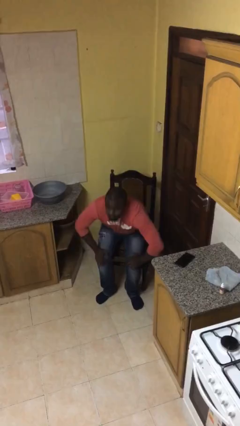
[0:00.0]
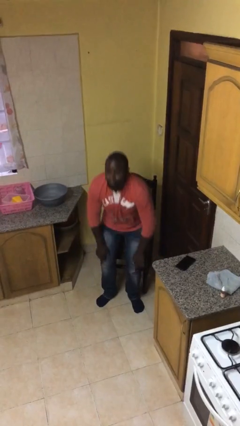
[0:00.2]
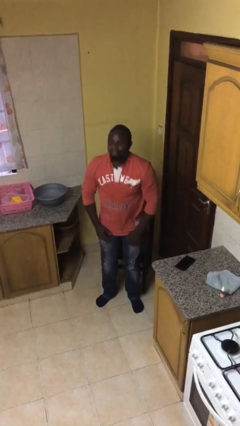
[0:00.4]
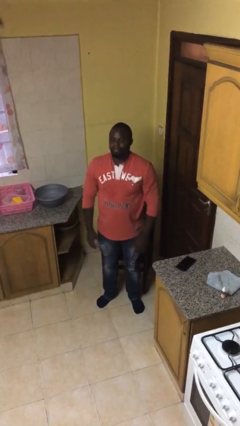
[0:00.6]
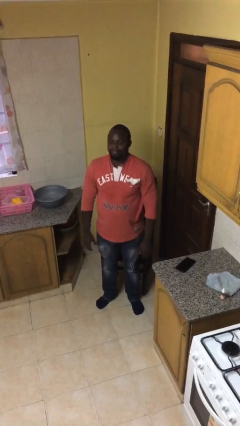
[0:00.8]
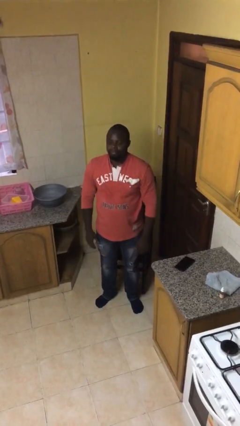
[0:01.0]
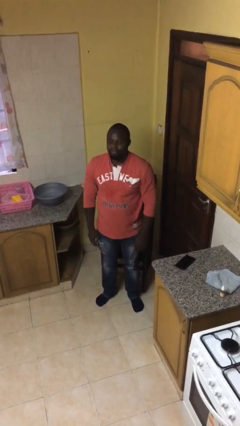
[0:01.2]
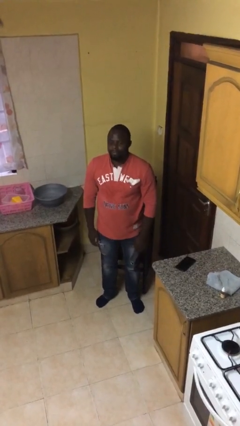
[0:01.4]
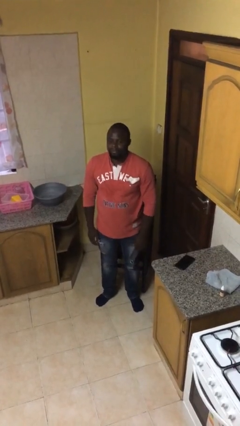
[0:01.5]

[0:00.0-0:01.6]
person stands up

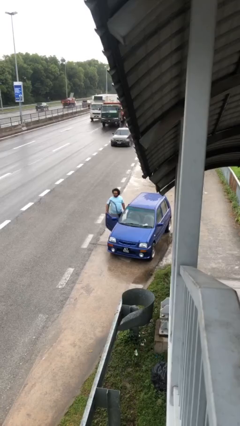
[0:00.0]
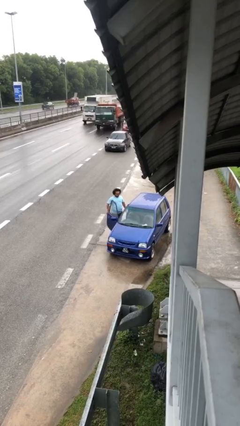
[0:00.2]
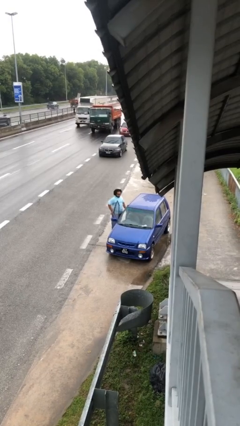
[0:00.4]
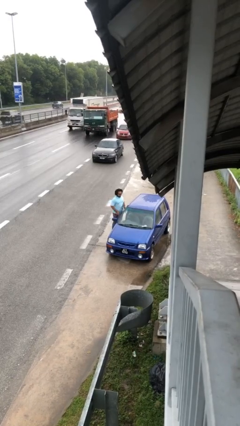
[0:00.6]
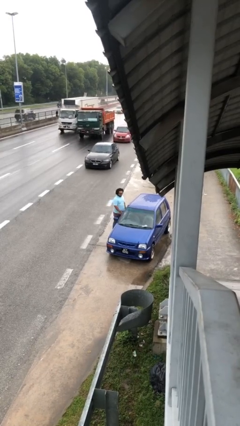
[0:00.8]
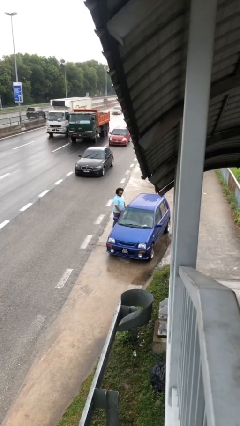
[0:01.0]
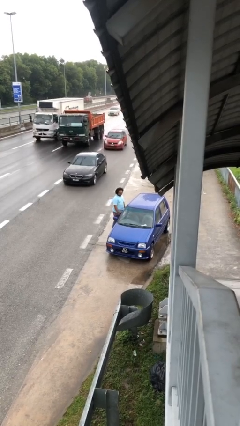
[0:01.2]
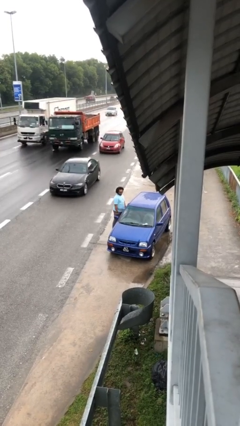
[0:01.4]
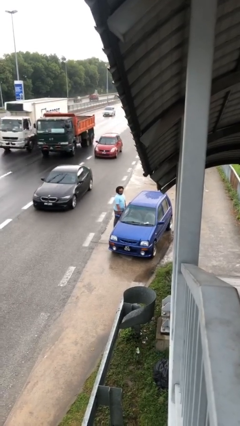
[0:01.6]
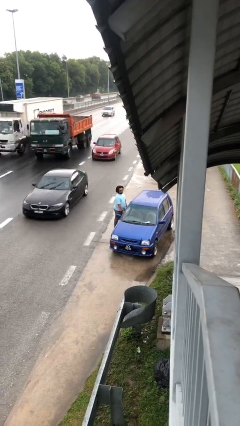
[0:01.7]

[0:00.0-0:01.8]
person closes car door

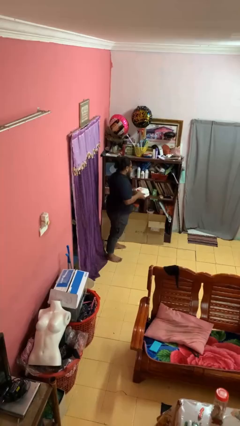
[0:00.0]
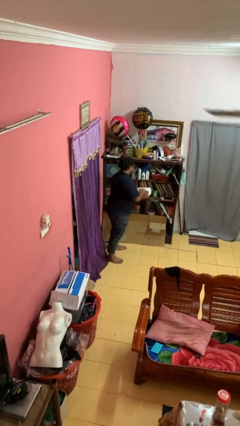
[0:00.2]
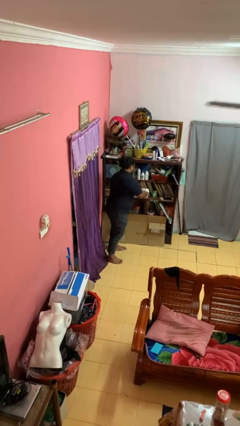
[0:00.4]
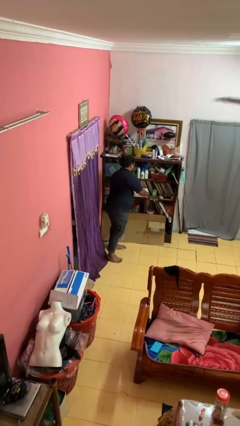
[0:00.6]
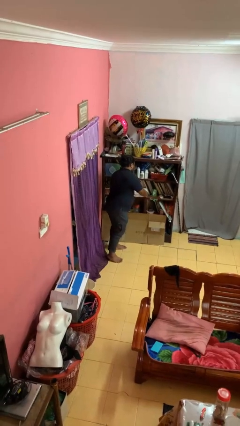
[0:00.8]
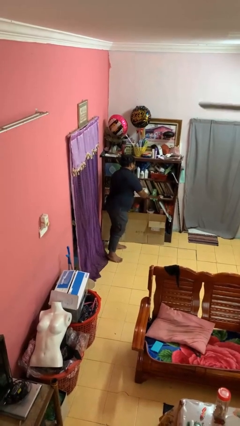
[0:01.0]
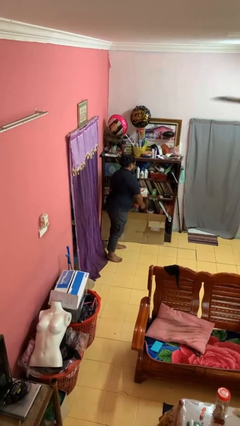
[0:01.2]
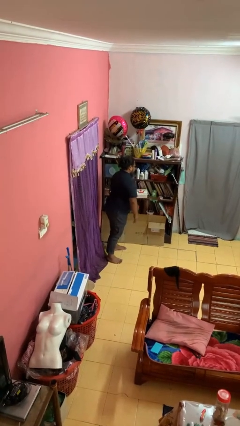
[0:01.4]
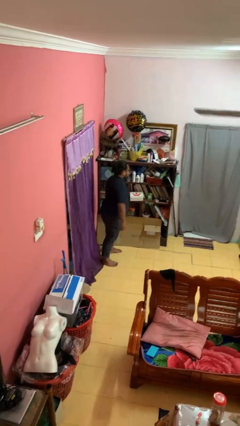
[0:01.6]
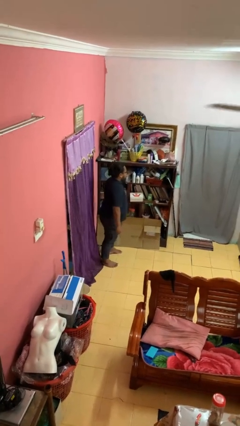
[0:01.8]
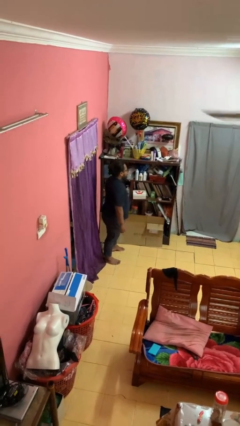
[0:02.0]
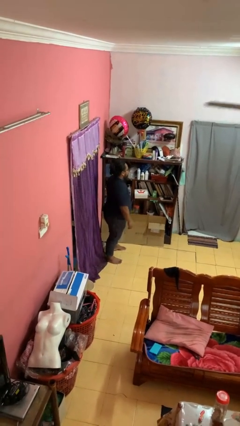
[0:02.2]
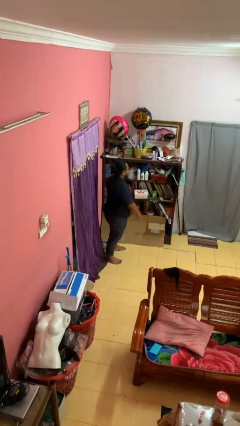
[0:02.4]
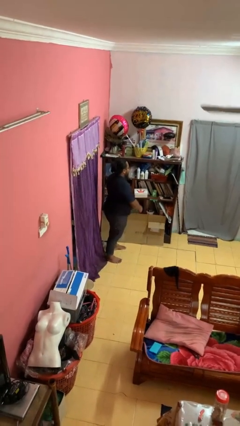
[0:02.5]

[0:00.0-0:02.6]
person puts object in cabinet

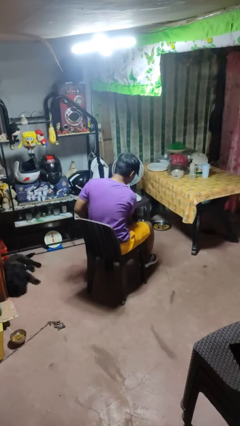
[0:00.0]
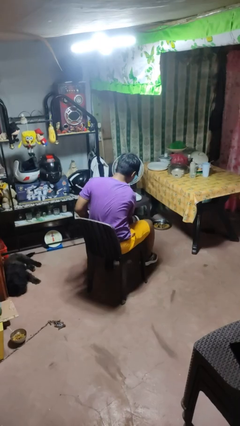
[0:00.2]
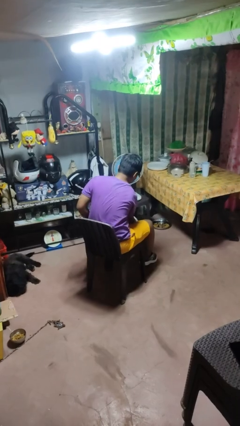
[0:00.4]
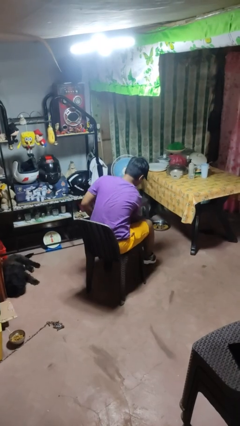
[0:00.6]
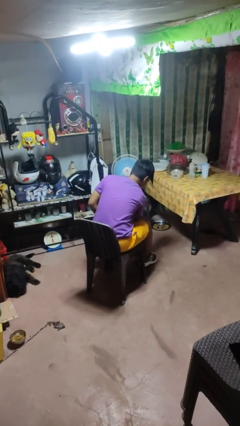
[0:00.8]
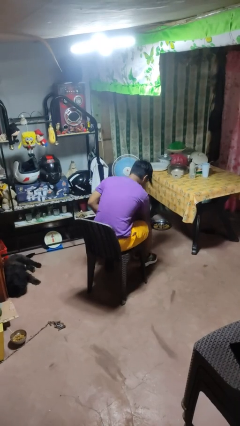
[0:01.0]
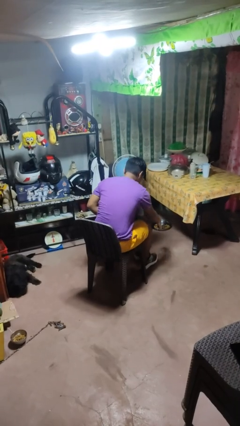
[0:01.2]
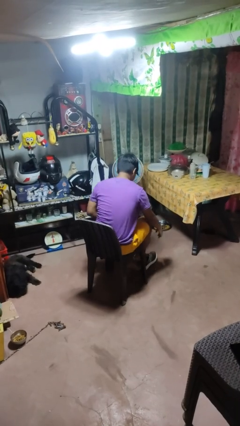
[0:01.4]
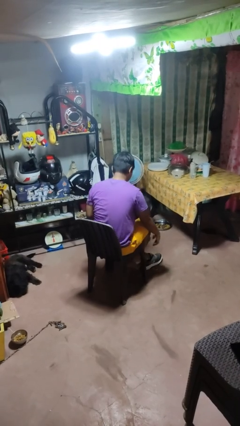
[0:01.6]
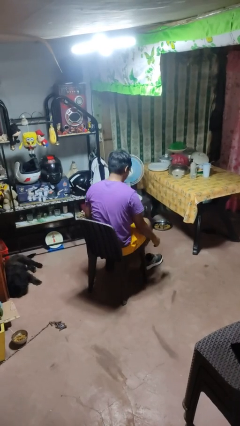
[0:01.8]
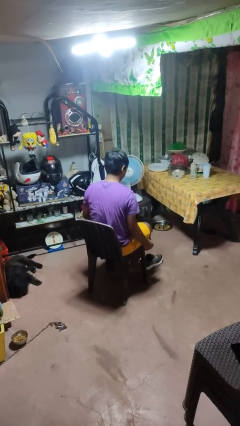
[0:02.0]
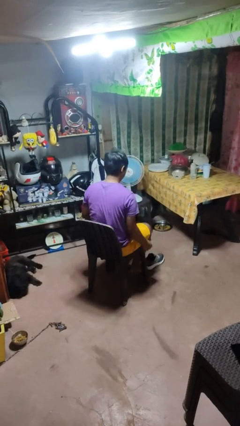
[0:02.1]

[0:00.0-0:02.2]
person takes off shoes

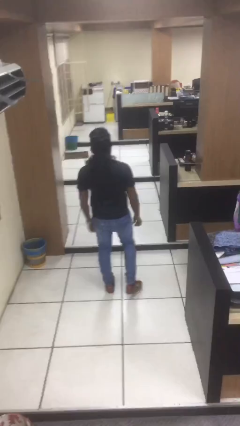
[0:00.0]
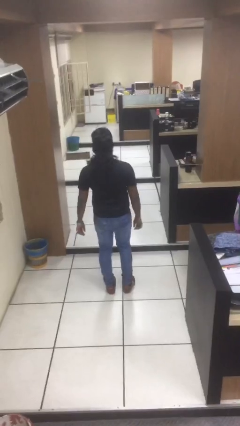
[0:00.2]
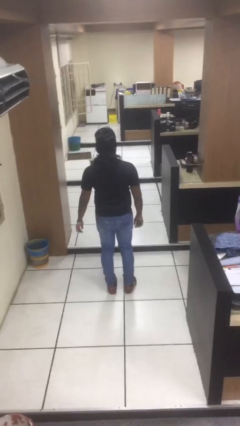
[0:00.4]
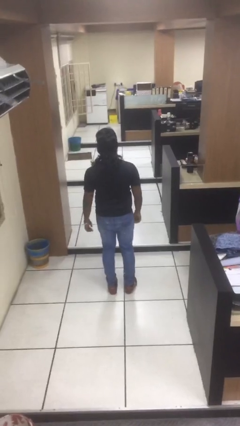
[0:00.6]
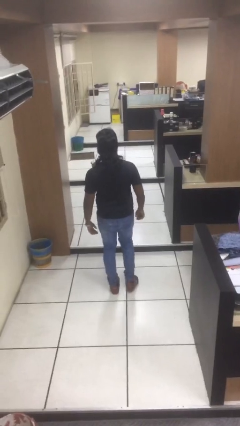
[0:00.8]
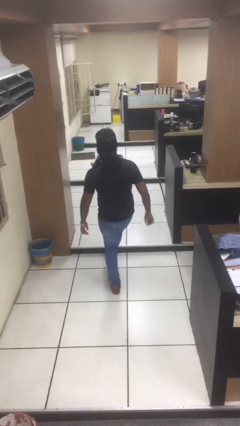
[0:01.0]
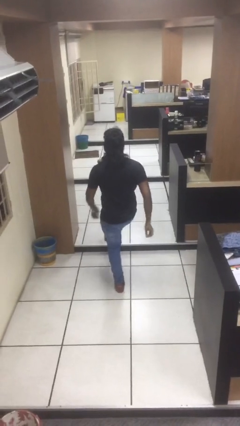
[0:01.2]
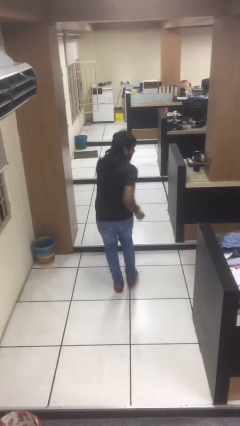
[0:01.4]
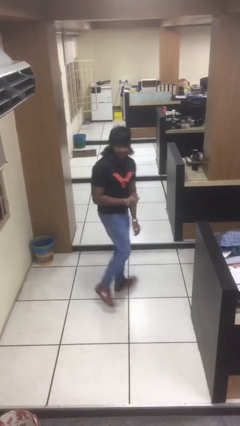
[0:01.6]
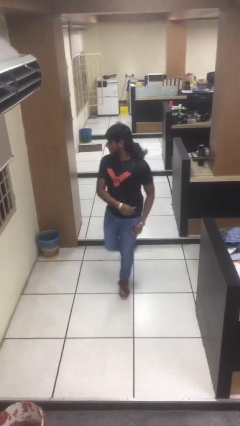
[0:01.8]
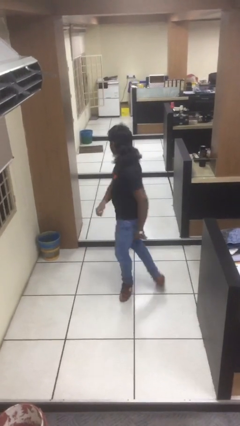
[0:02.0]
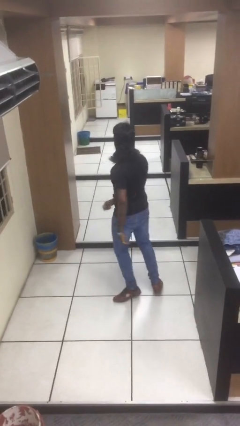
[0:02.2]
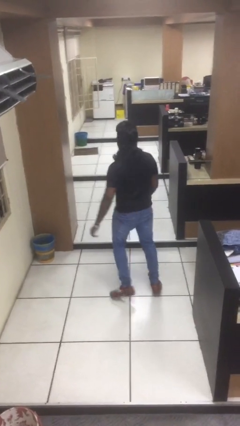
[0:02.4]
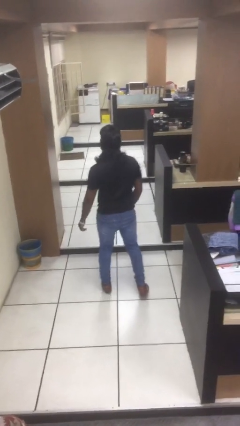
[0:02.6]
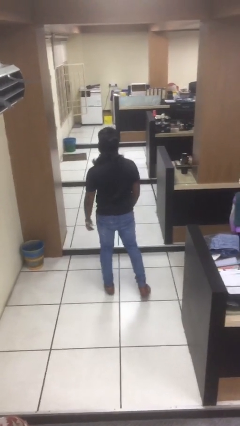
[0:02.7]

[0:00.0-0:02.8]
person twirls

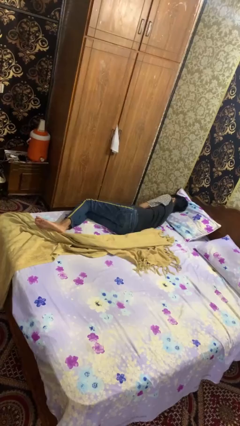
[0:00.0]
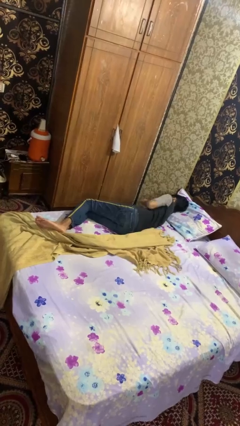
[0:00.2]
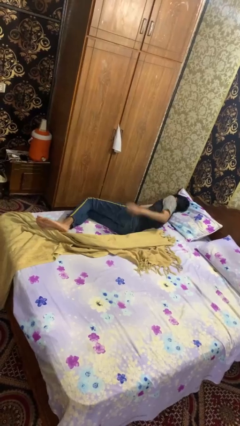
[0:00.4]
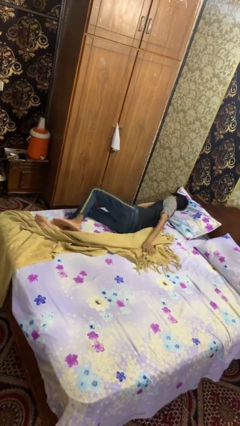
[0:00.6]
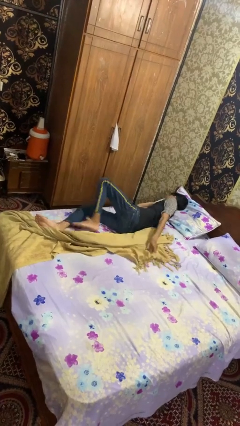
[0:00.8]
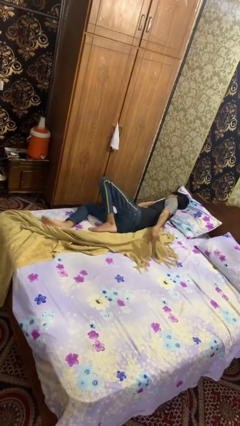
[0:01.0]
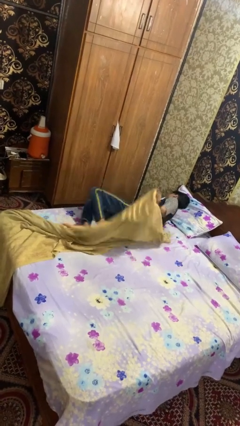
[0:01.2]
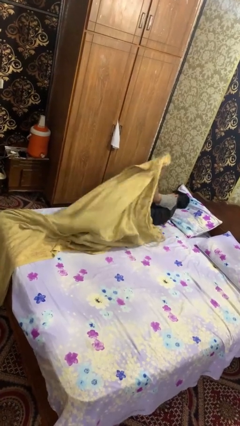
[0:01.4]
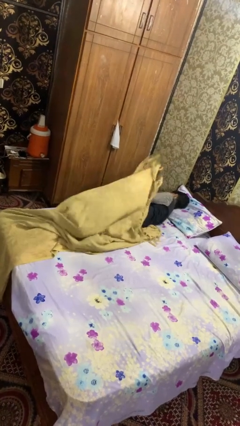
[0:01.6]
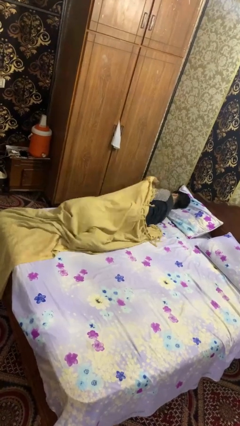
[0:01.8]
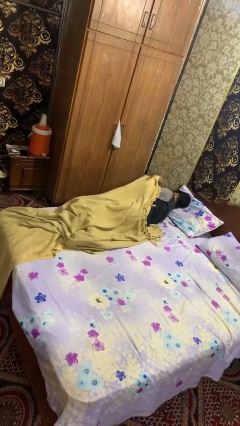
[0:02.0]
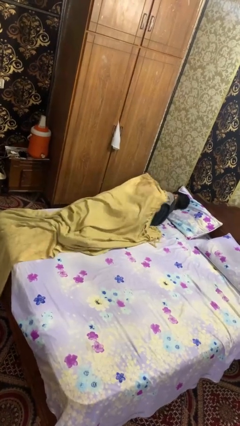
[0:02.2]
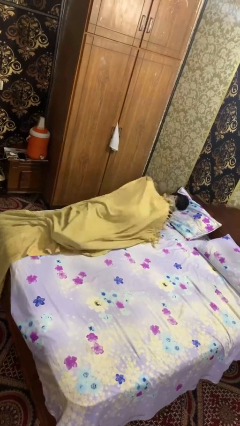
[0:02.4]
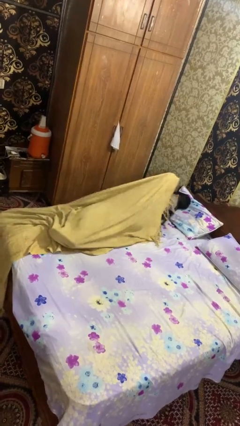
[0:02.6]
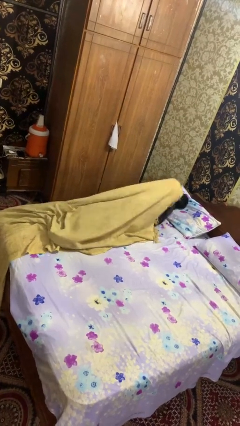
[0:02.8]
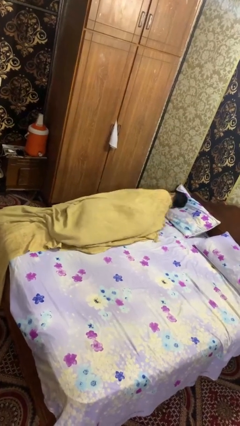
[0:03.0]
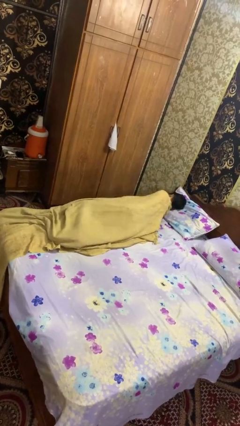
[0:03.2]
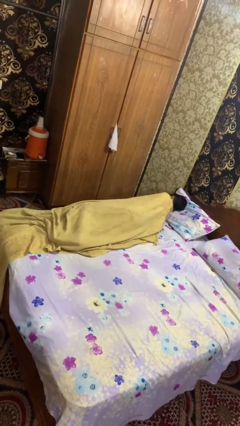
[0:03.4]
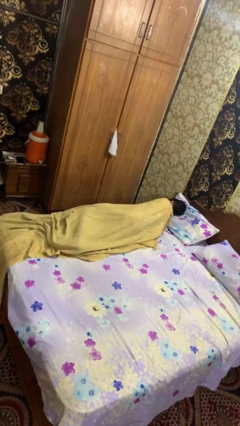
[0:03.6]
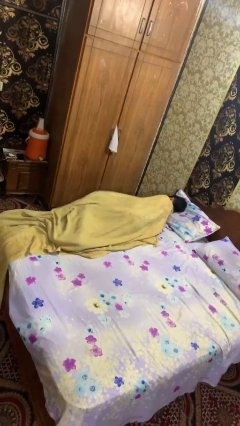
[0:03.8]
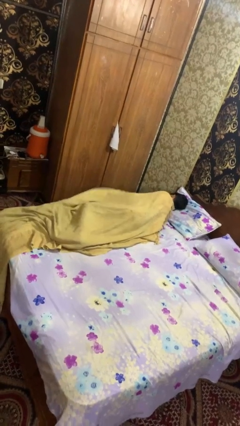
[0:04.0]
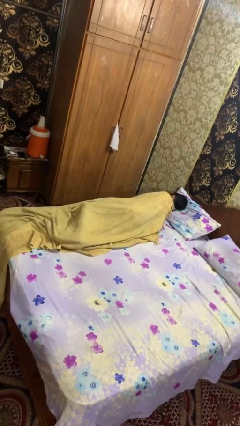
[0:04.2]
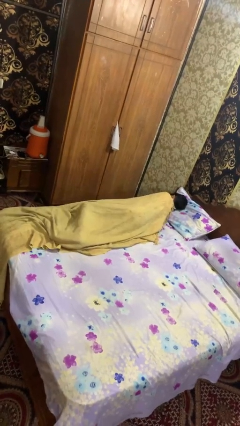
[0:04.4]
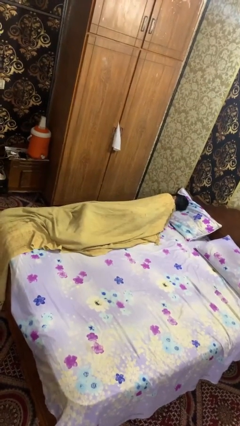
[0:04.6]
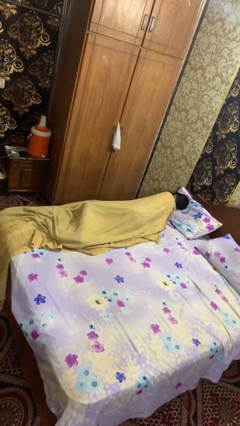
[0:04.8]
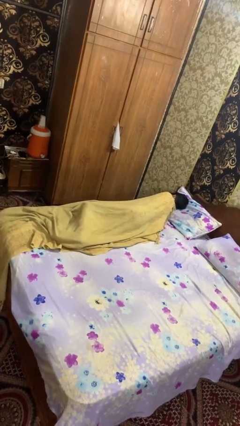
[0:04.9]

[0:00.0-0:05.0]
person covers with bedsheets

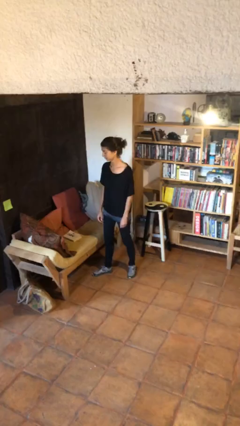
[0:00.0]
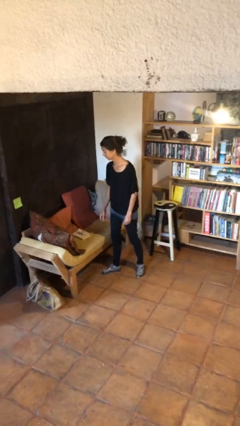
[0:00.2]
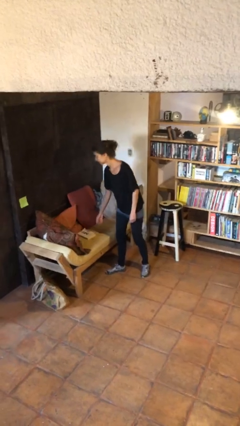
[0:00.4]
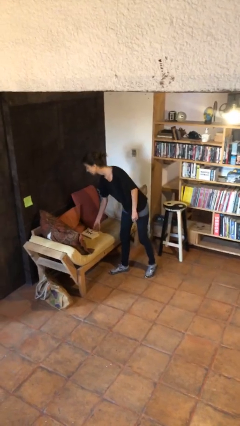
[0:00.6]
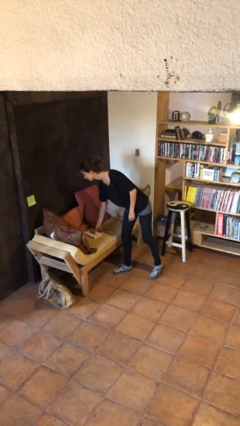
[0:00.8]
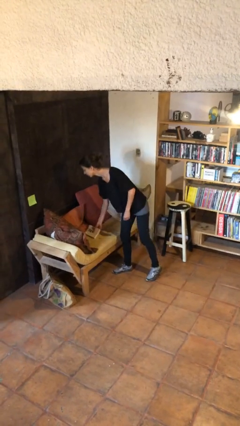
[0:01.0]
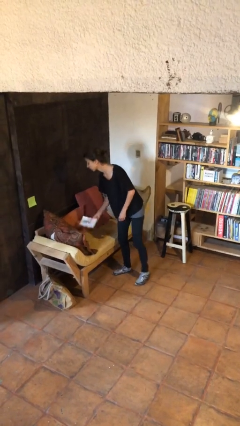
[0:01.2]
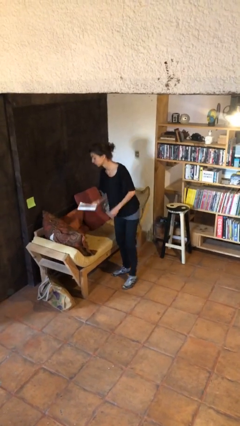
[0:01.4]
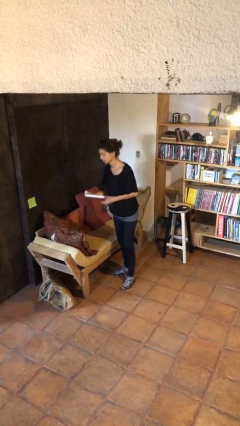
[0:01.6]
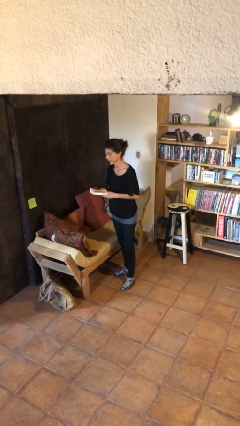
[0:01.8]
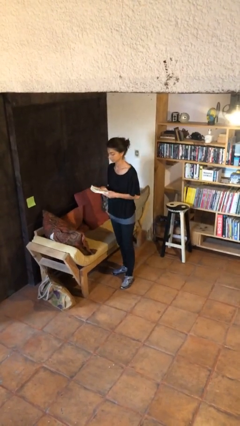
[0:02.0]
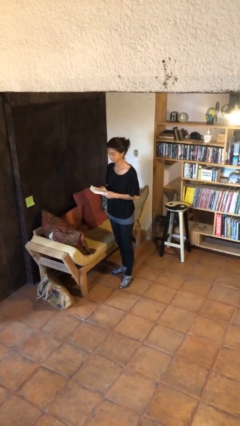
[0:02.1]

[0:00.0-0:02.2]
person picks up object from couch
